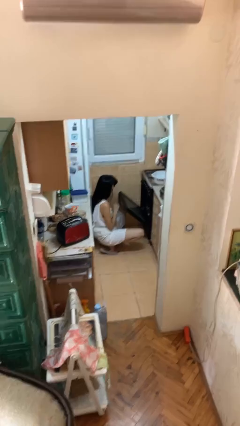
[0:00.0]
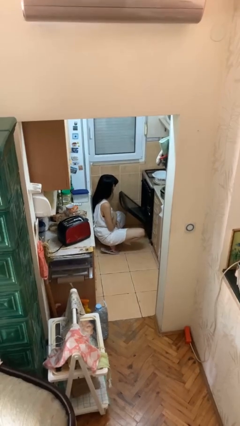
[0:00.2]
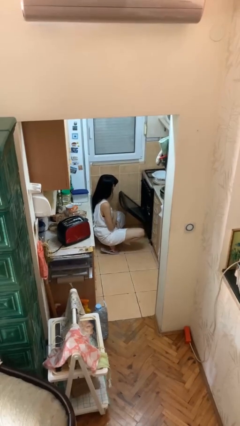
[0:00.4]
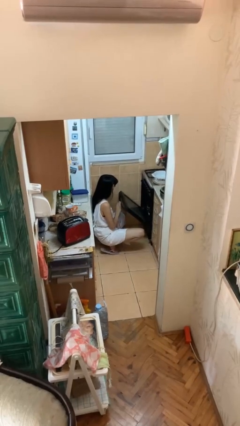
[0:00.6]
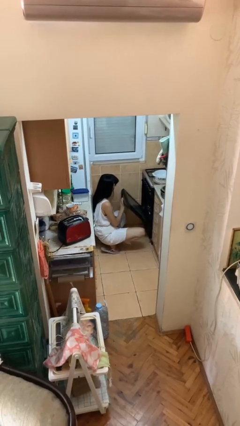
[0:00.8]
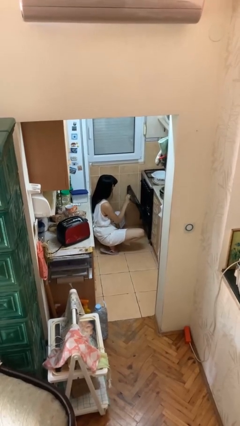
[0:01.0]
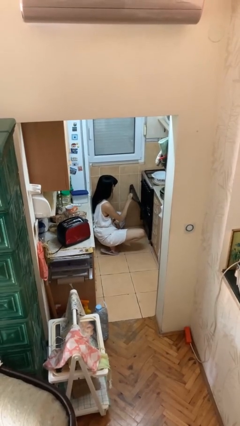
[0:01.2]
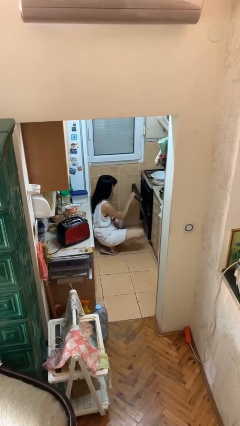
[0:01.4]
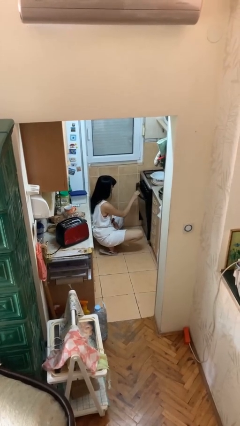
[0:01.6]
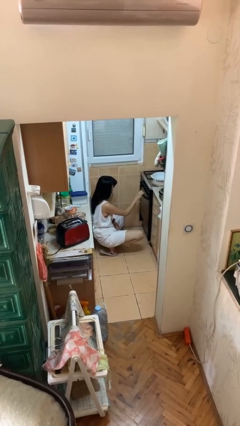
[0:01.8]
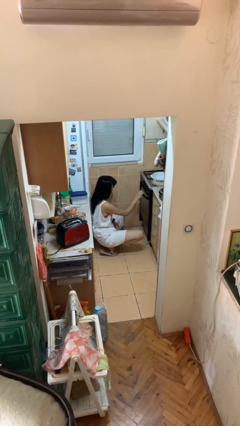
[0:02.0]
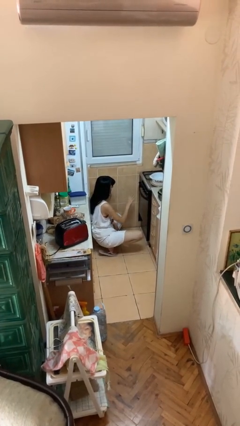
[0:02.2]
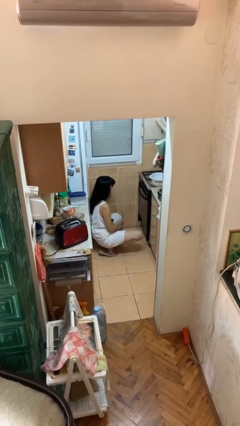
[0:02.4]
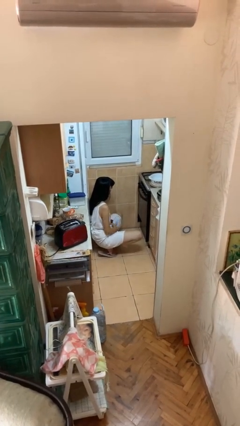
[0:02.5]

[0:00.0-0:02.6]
person closes oven door

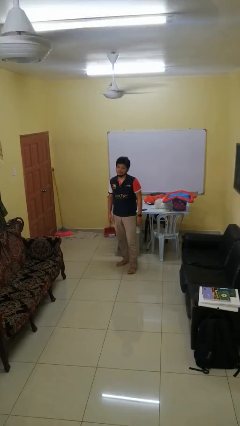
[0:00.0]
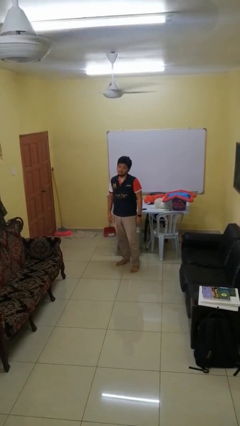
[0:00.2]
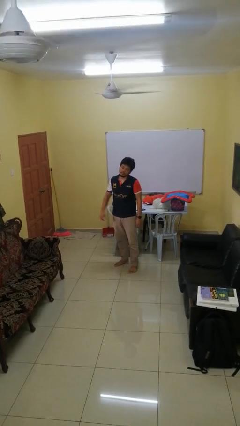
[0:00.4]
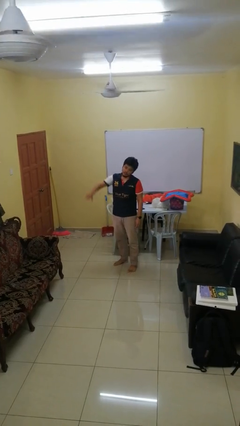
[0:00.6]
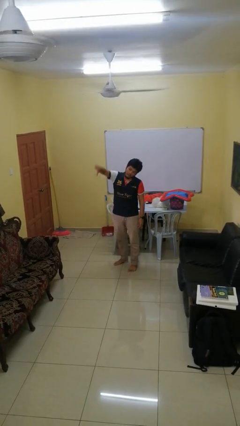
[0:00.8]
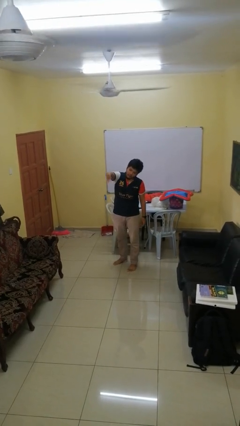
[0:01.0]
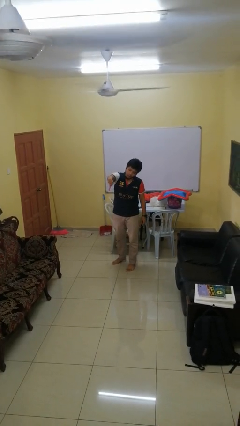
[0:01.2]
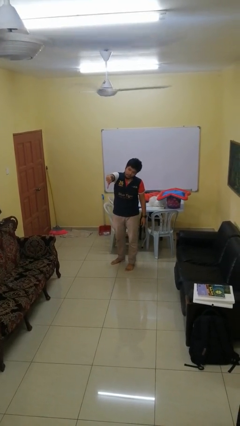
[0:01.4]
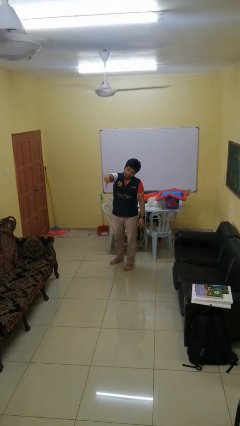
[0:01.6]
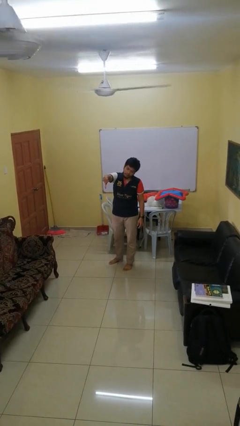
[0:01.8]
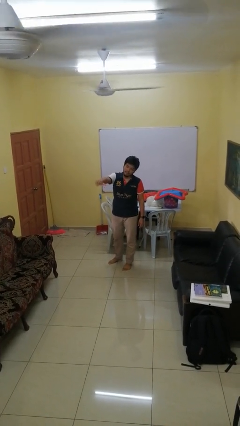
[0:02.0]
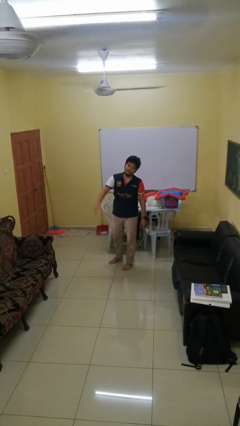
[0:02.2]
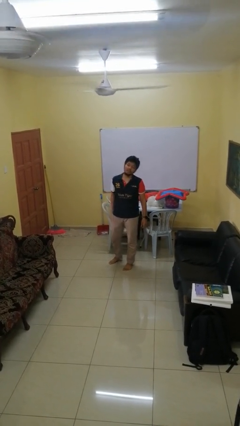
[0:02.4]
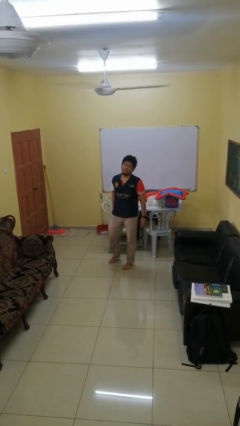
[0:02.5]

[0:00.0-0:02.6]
person gestures thumbs down

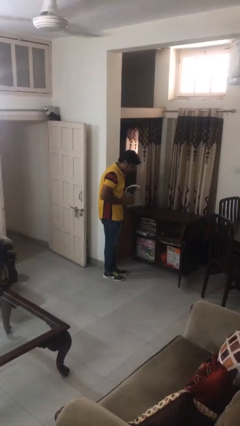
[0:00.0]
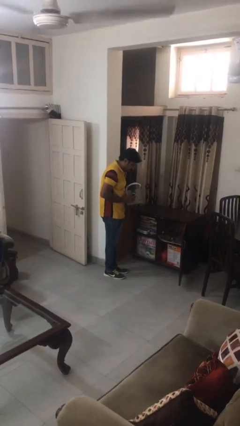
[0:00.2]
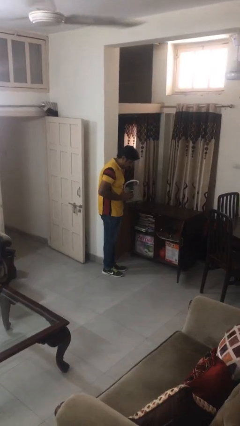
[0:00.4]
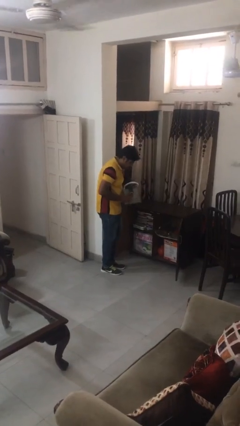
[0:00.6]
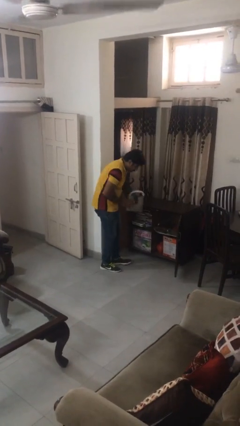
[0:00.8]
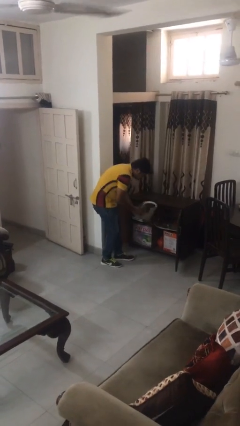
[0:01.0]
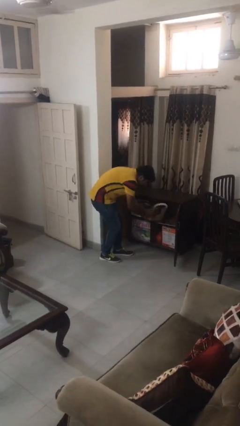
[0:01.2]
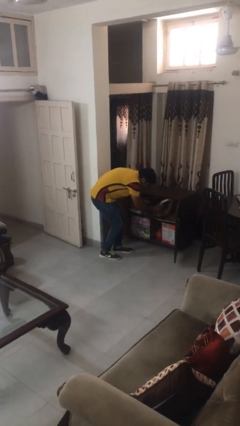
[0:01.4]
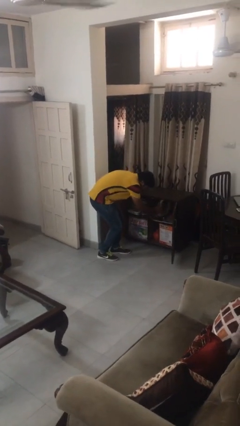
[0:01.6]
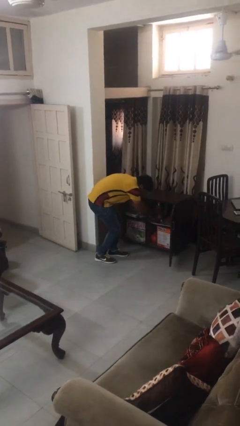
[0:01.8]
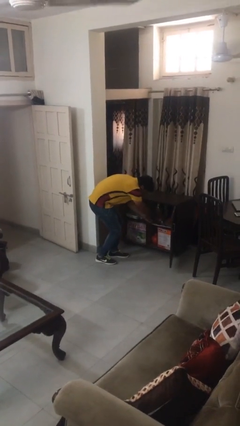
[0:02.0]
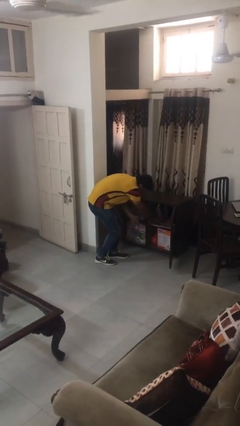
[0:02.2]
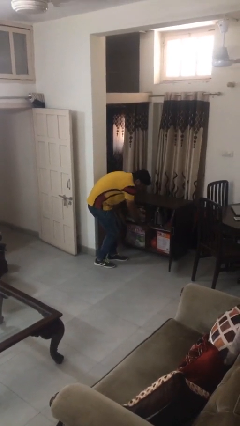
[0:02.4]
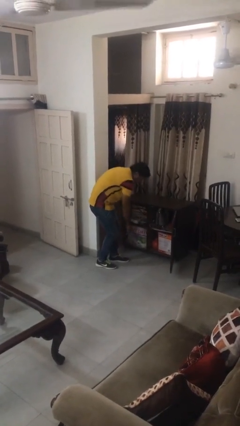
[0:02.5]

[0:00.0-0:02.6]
person puts down object into cabinet

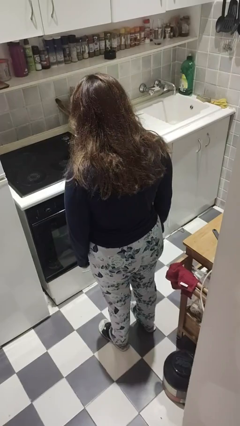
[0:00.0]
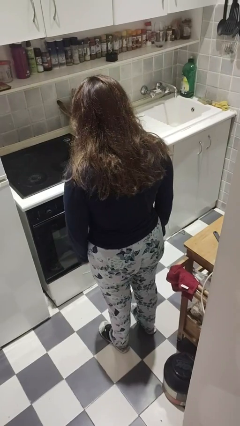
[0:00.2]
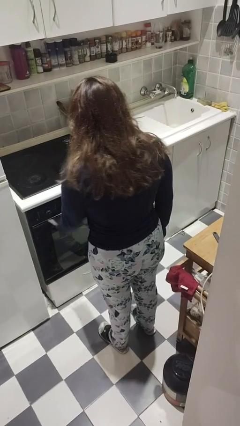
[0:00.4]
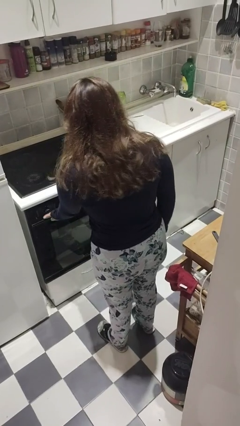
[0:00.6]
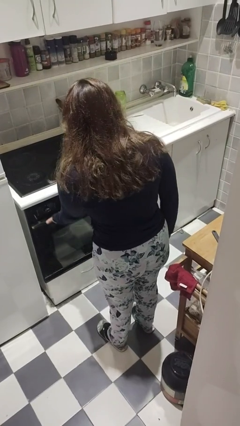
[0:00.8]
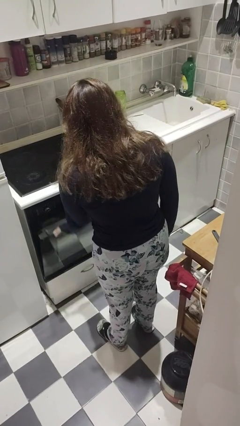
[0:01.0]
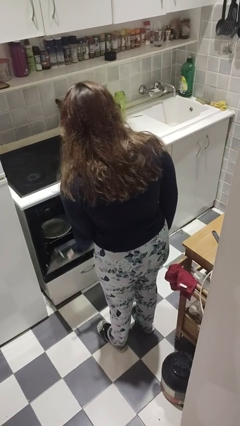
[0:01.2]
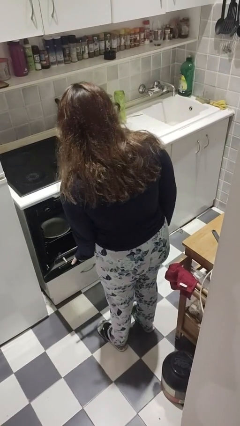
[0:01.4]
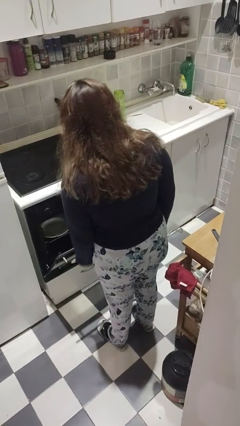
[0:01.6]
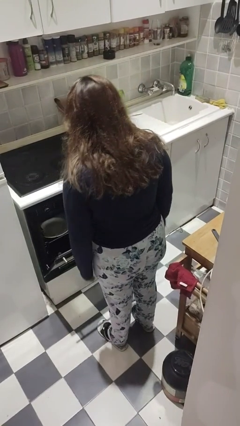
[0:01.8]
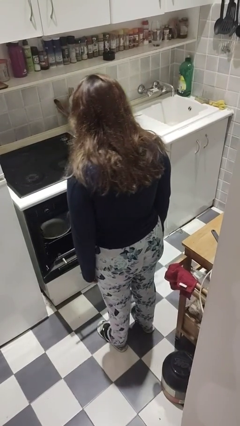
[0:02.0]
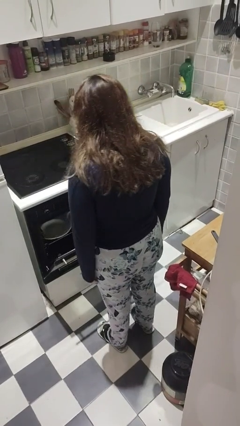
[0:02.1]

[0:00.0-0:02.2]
person opens dishwasher

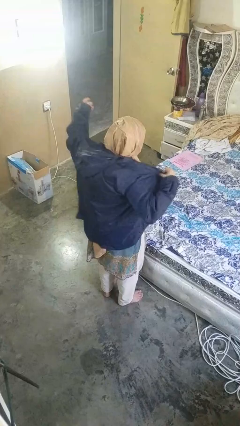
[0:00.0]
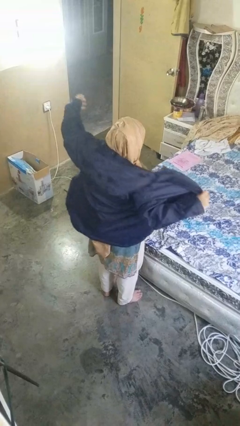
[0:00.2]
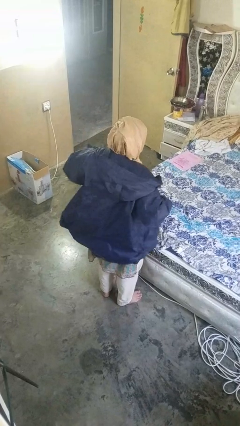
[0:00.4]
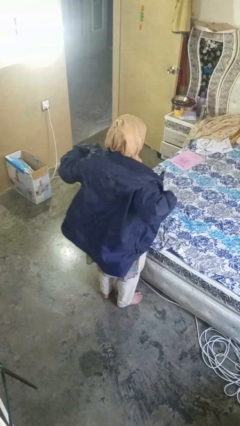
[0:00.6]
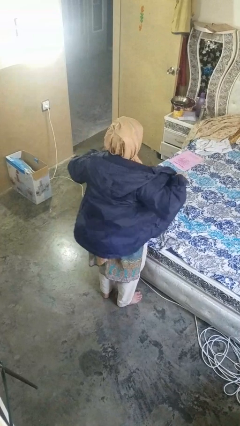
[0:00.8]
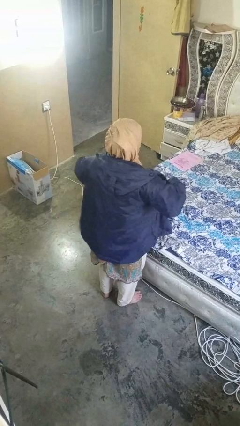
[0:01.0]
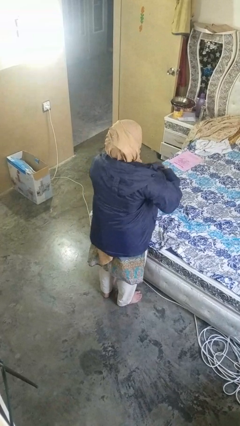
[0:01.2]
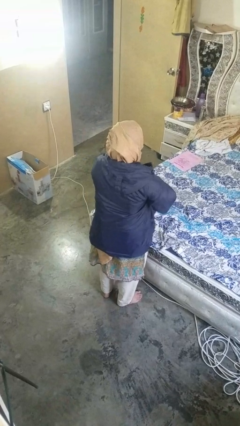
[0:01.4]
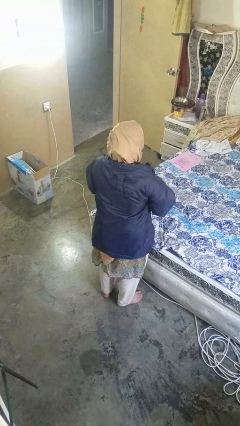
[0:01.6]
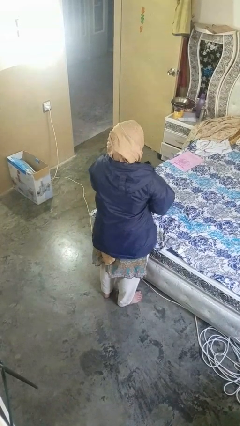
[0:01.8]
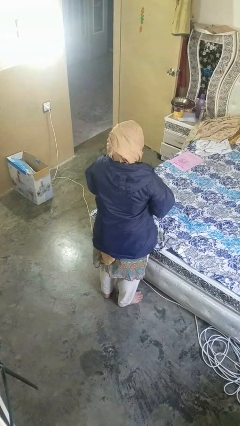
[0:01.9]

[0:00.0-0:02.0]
person zips up jacket

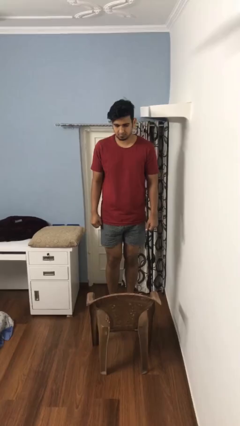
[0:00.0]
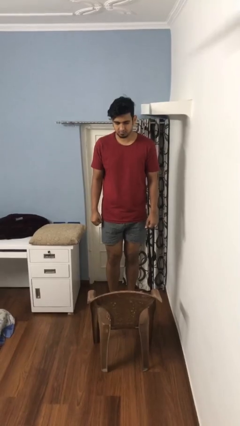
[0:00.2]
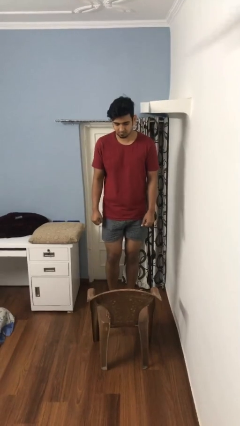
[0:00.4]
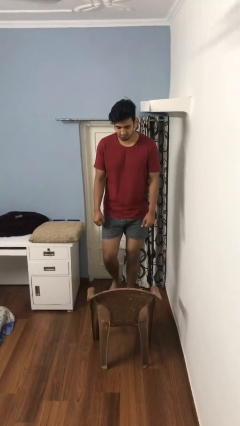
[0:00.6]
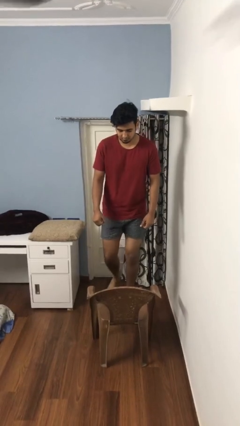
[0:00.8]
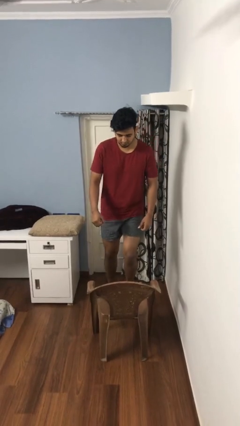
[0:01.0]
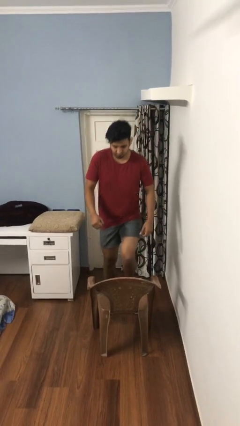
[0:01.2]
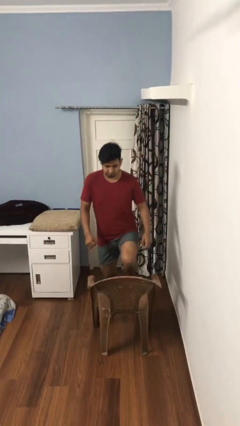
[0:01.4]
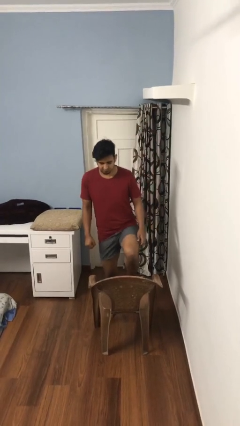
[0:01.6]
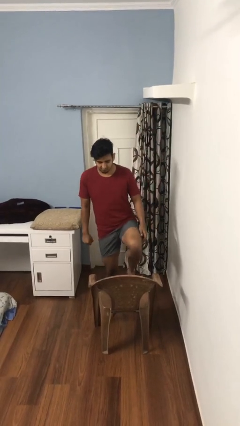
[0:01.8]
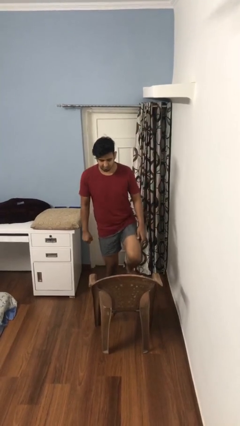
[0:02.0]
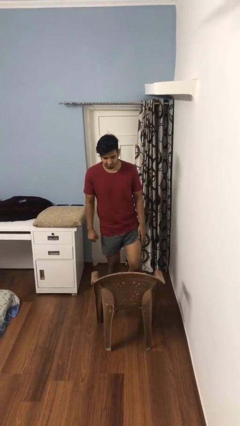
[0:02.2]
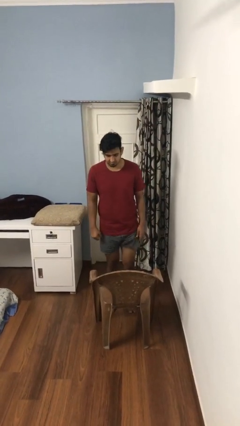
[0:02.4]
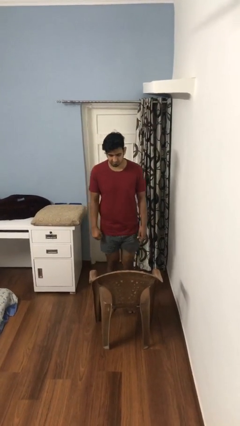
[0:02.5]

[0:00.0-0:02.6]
person climbs off chair

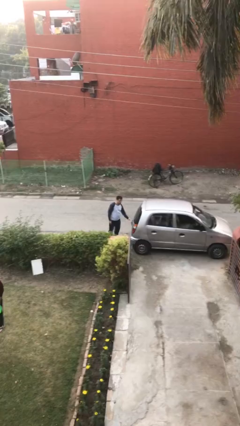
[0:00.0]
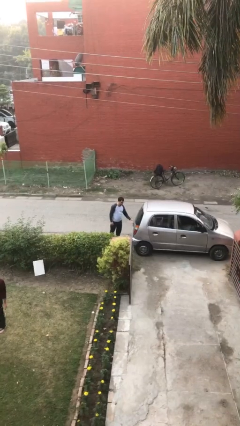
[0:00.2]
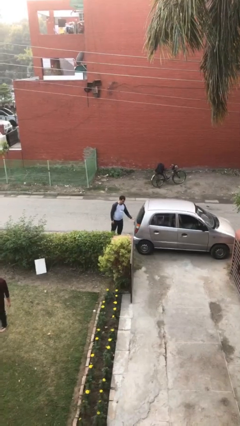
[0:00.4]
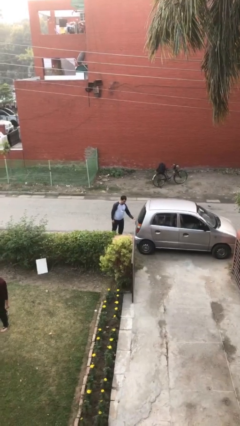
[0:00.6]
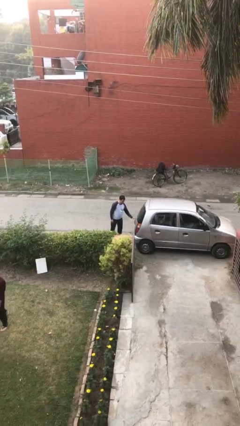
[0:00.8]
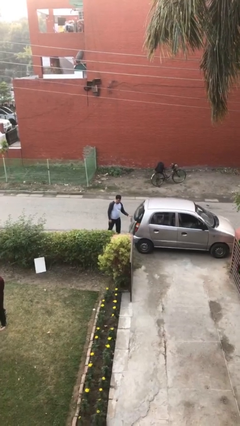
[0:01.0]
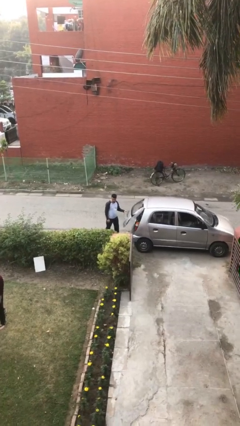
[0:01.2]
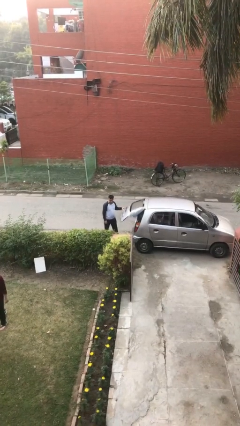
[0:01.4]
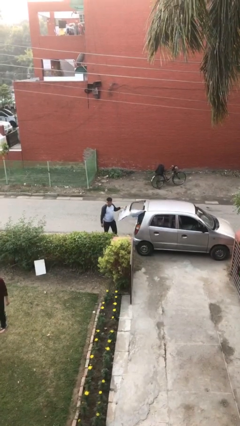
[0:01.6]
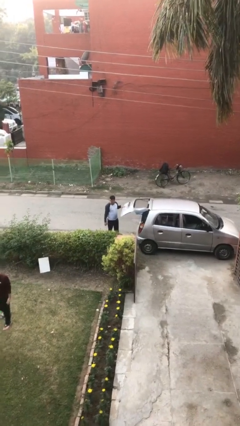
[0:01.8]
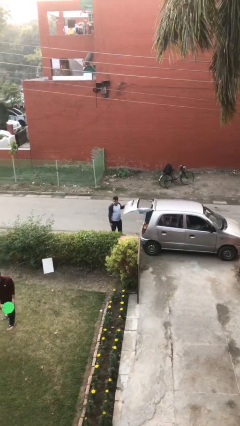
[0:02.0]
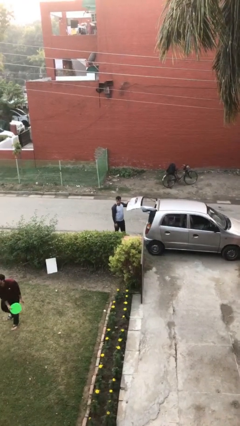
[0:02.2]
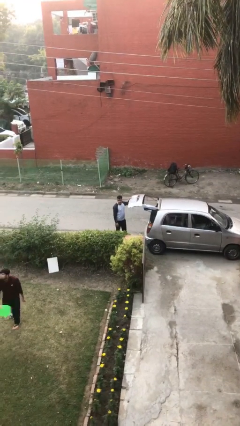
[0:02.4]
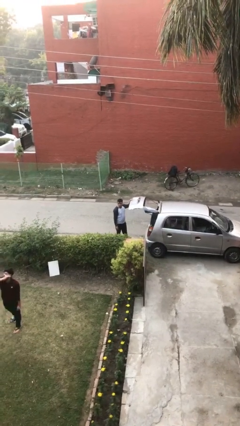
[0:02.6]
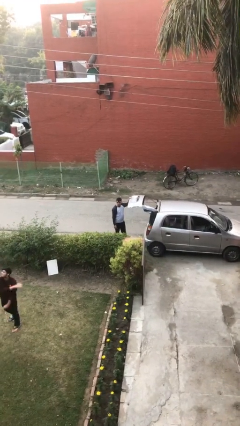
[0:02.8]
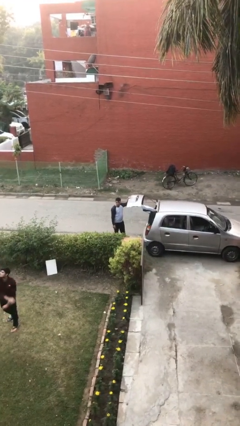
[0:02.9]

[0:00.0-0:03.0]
person opens car trunk
